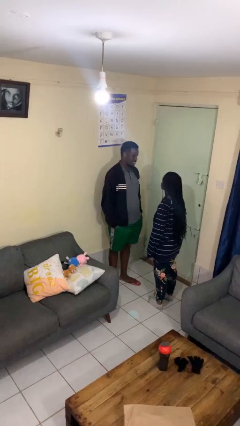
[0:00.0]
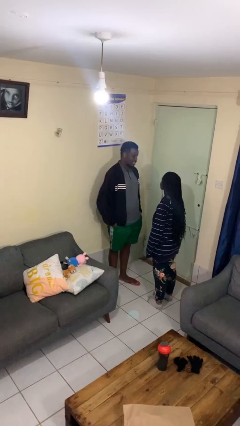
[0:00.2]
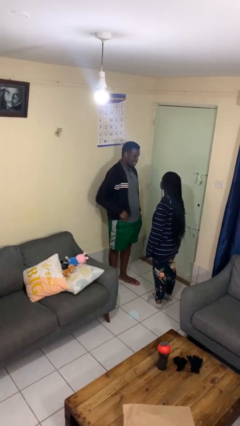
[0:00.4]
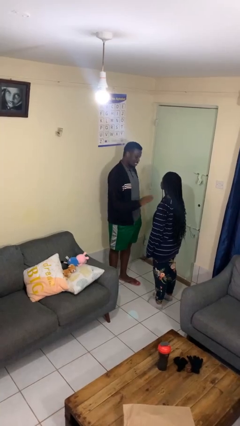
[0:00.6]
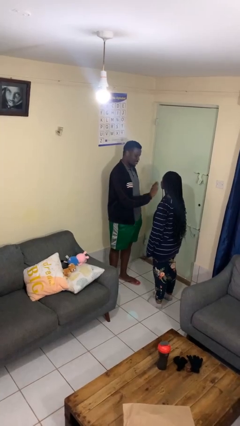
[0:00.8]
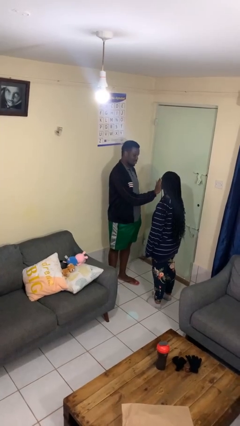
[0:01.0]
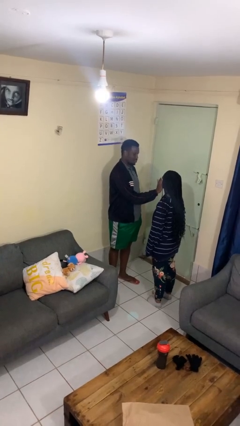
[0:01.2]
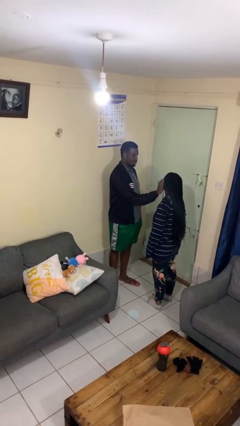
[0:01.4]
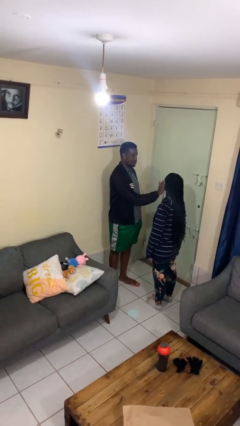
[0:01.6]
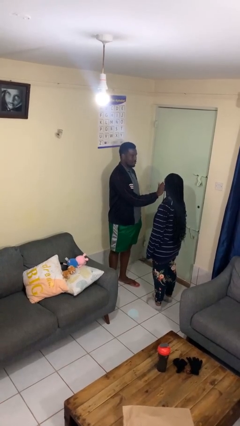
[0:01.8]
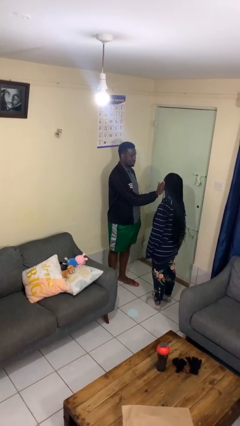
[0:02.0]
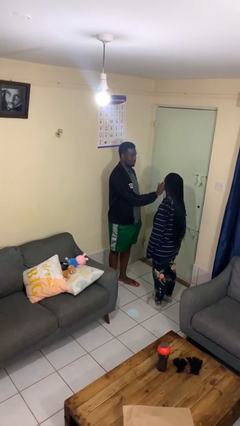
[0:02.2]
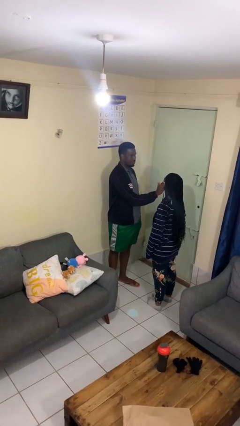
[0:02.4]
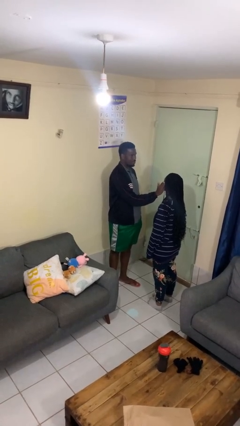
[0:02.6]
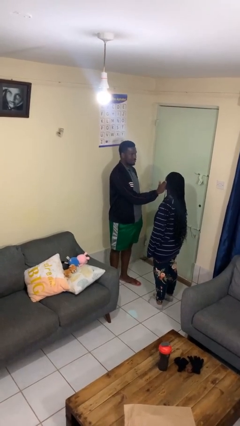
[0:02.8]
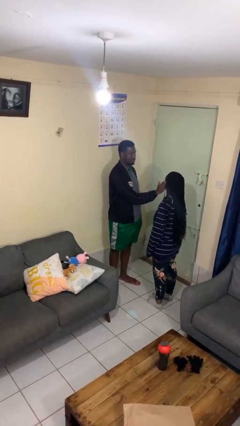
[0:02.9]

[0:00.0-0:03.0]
person touches face of person

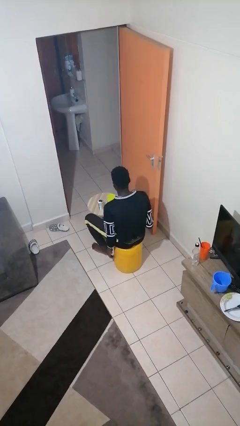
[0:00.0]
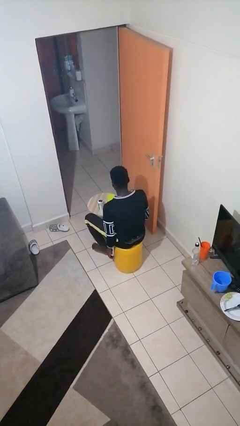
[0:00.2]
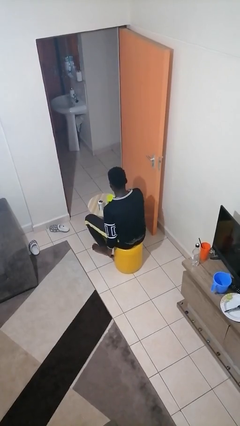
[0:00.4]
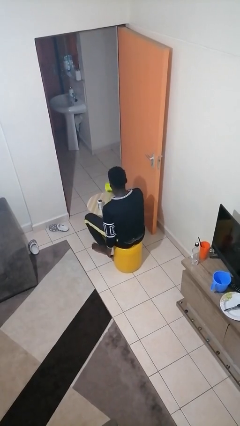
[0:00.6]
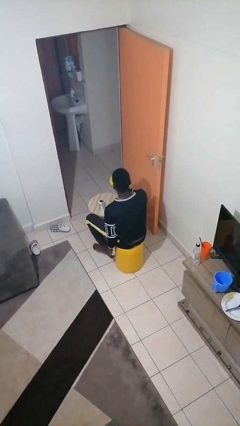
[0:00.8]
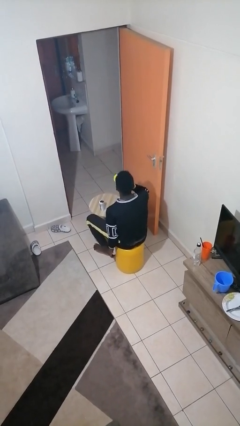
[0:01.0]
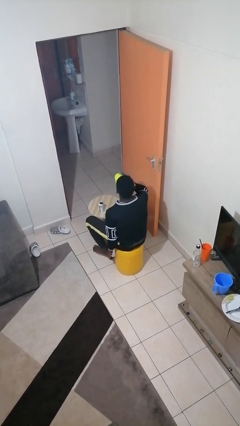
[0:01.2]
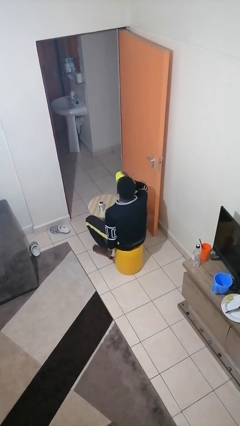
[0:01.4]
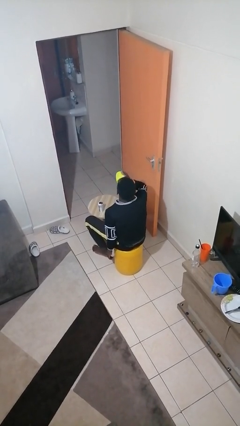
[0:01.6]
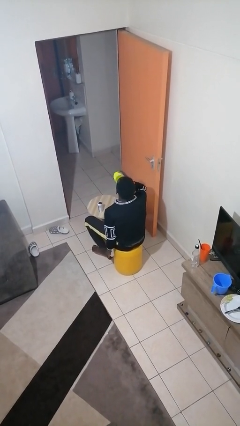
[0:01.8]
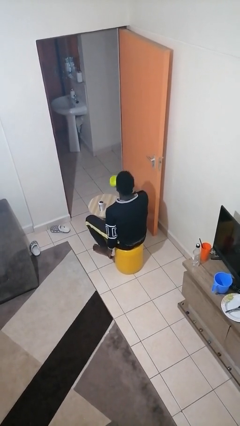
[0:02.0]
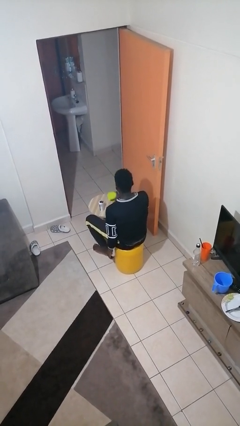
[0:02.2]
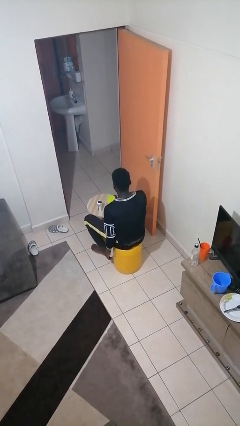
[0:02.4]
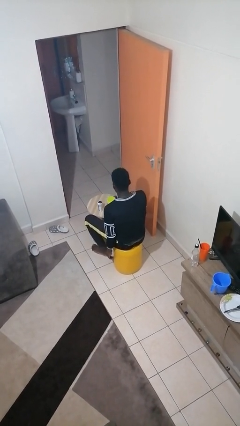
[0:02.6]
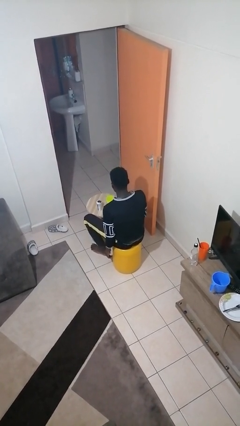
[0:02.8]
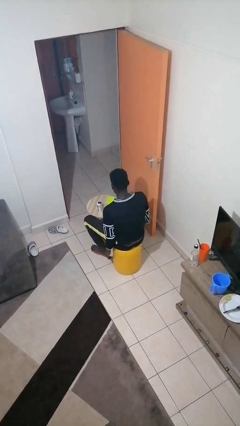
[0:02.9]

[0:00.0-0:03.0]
person drinks from cup

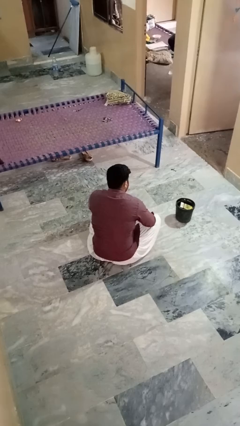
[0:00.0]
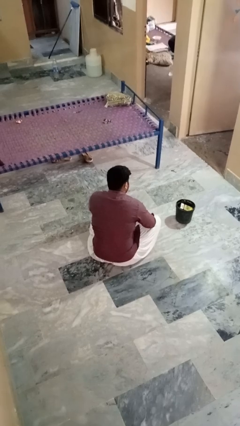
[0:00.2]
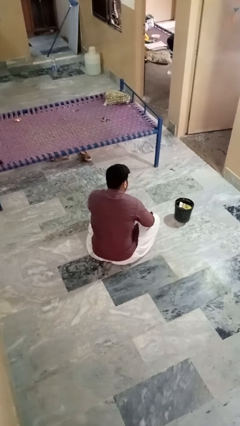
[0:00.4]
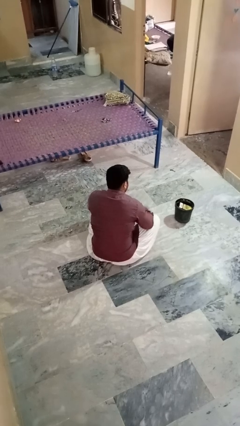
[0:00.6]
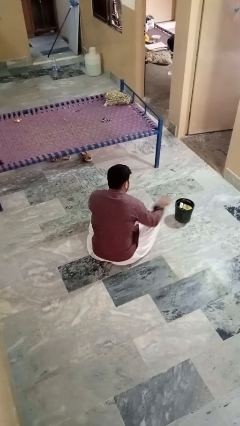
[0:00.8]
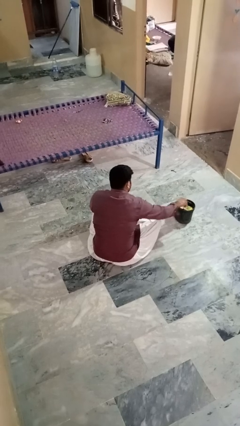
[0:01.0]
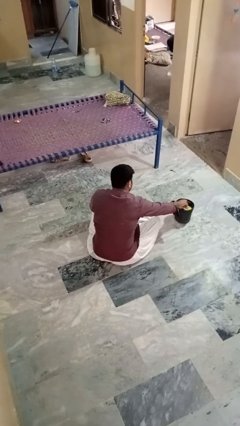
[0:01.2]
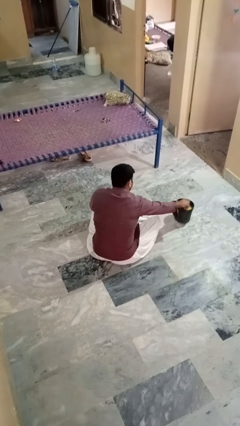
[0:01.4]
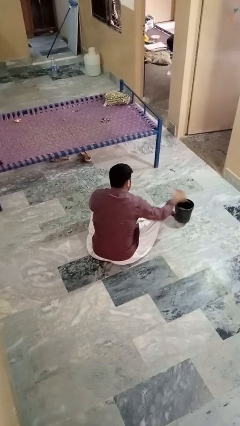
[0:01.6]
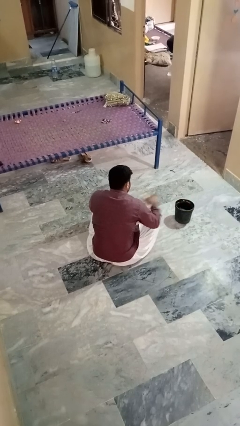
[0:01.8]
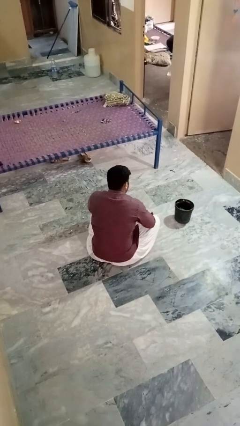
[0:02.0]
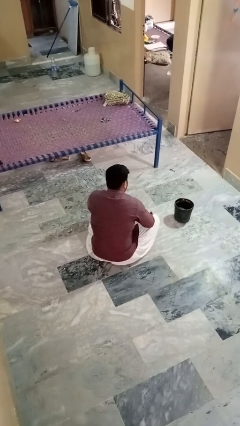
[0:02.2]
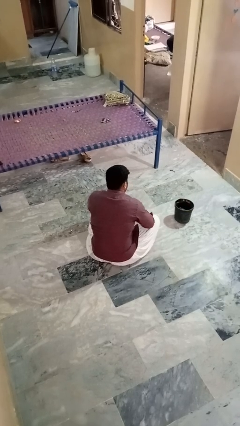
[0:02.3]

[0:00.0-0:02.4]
person takes object from basket

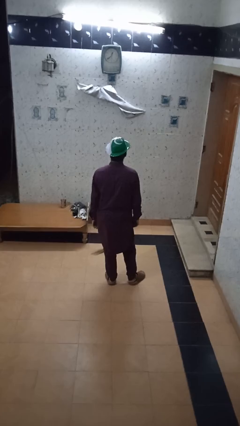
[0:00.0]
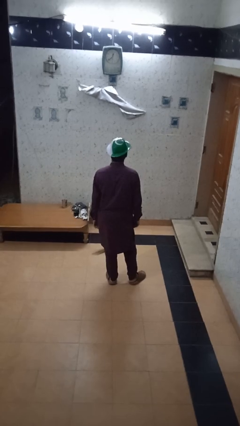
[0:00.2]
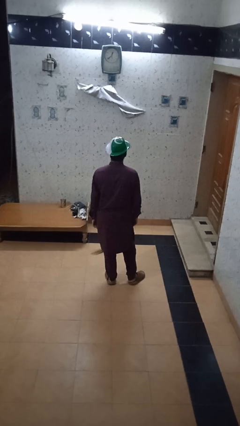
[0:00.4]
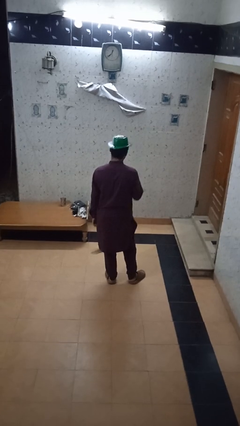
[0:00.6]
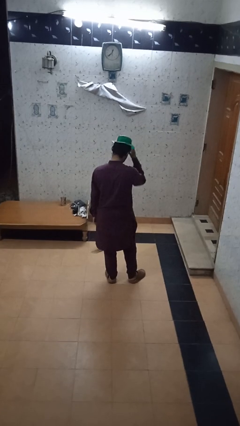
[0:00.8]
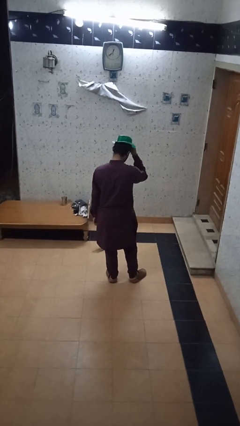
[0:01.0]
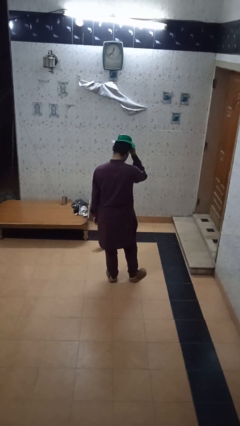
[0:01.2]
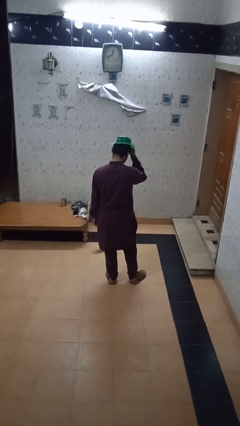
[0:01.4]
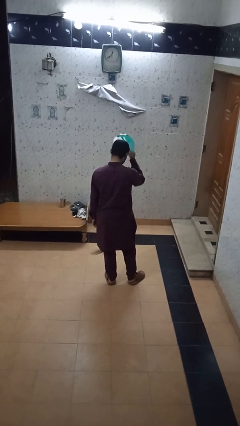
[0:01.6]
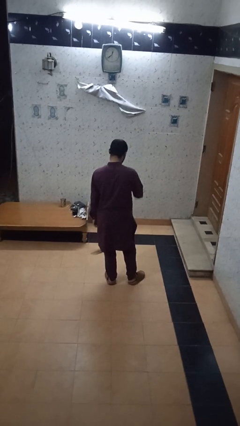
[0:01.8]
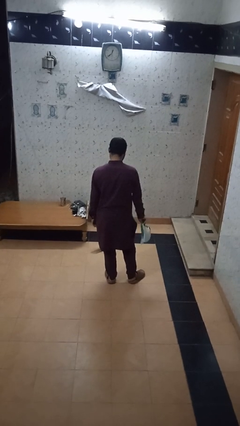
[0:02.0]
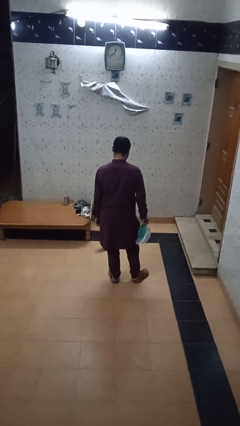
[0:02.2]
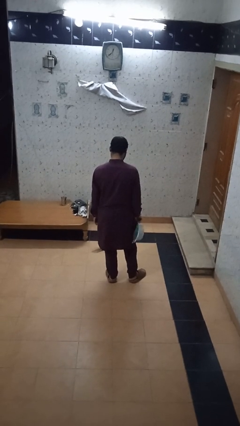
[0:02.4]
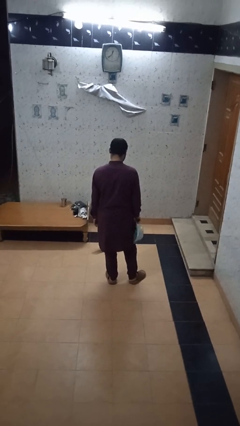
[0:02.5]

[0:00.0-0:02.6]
person takes off hat

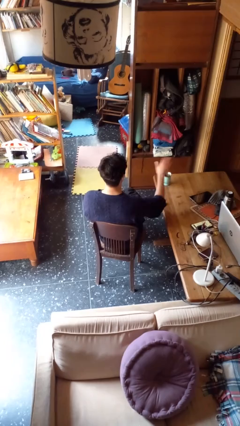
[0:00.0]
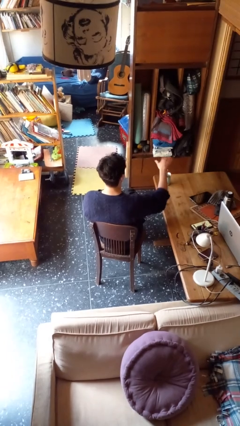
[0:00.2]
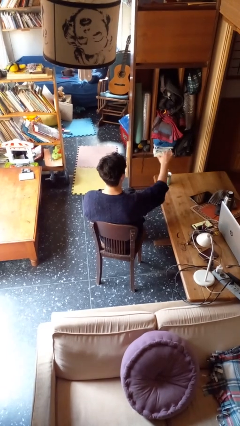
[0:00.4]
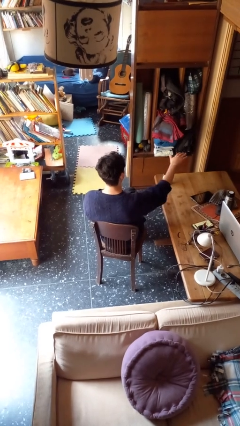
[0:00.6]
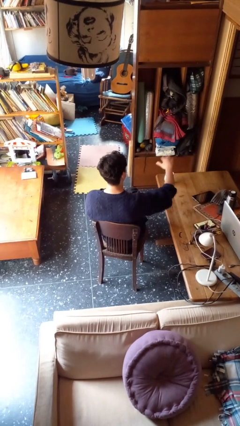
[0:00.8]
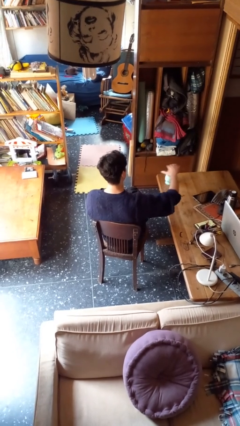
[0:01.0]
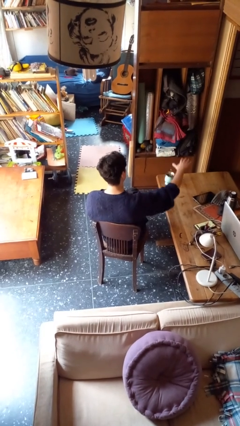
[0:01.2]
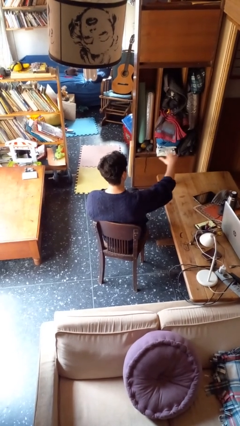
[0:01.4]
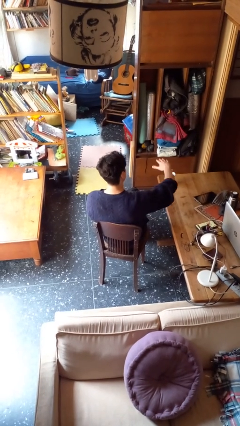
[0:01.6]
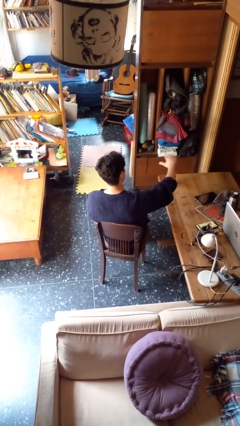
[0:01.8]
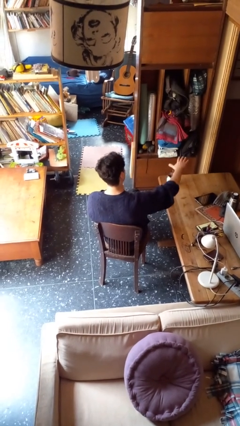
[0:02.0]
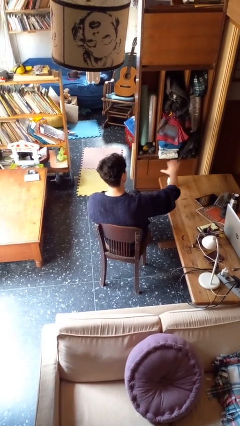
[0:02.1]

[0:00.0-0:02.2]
person waves hand over object

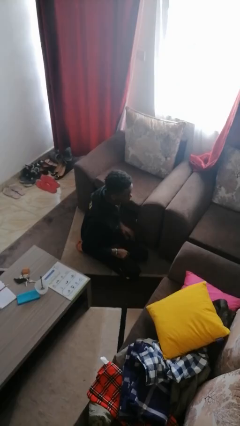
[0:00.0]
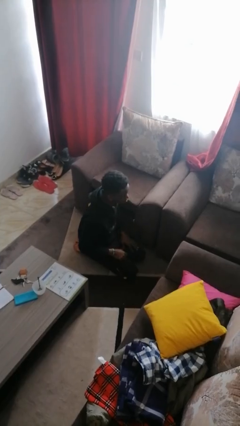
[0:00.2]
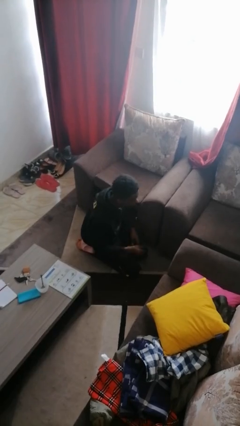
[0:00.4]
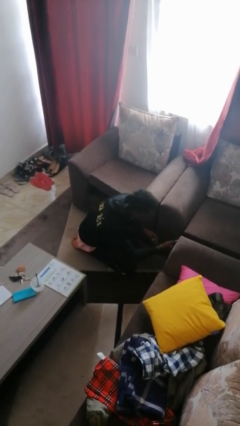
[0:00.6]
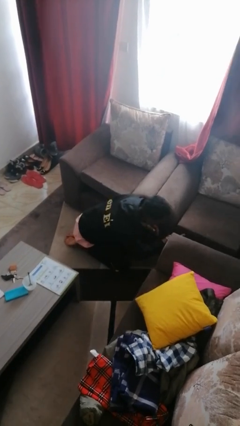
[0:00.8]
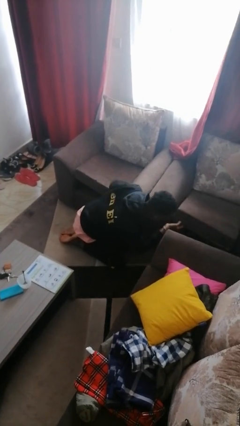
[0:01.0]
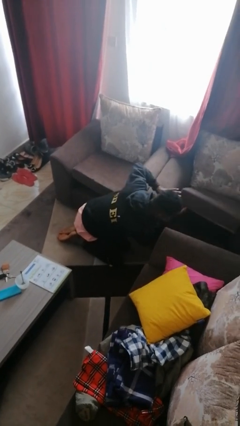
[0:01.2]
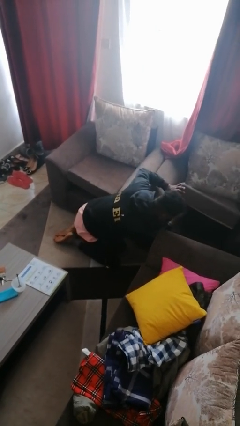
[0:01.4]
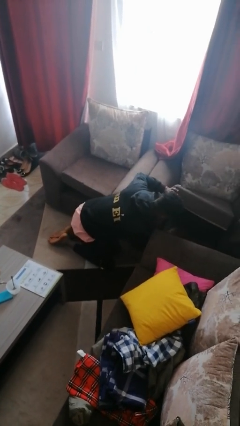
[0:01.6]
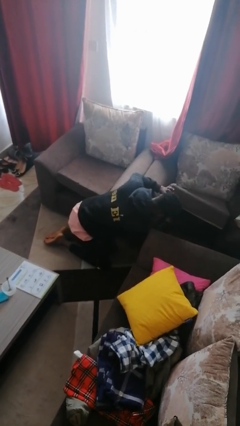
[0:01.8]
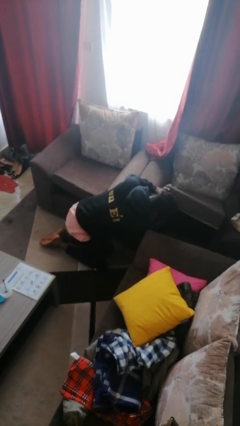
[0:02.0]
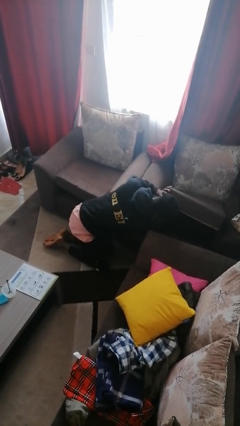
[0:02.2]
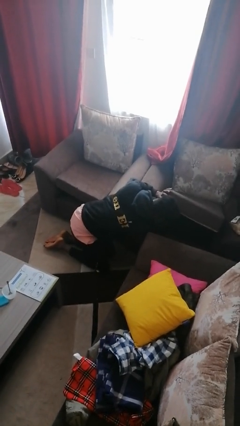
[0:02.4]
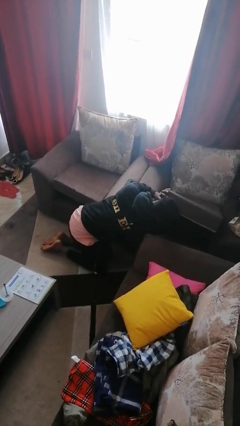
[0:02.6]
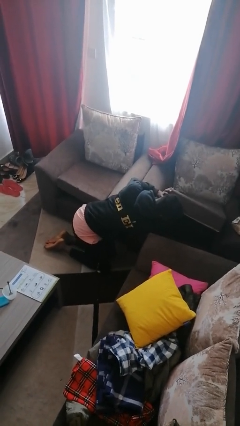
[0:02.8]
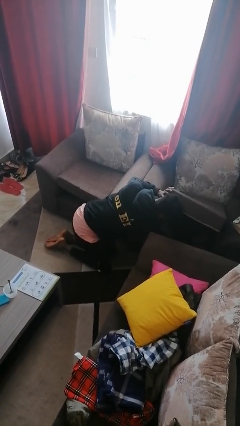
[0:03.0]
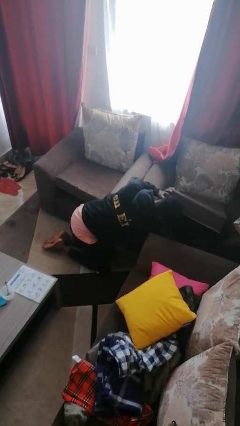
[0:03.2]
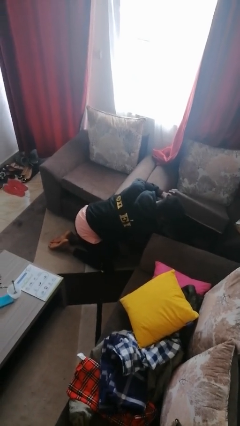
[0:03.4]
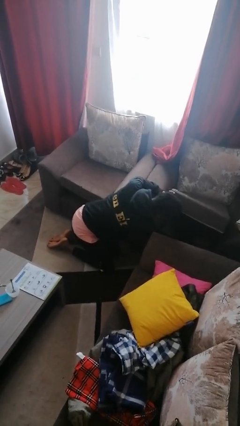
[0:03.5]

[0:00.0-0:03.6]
person searches in couch
